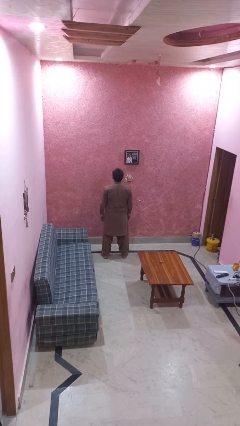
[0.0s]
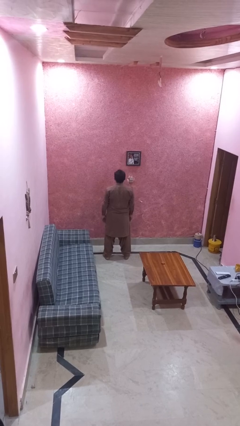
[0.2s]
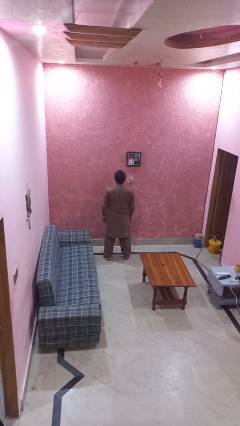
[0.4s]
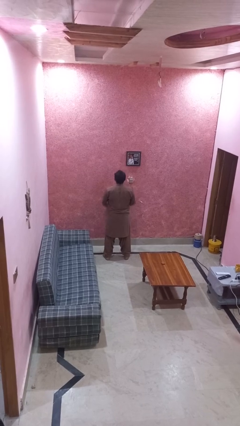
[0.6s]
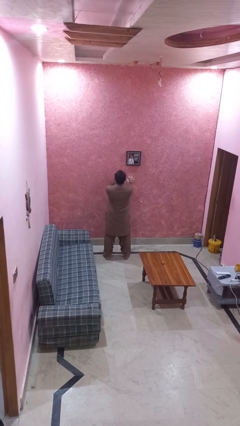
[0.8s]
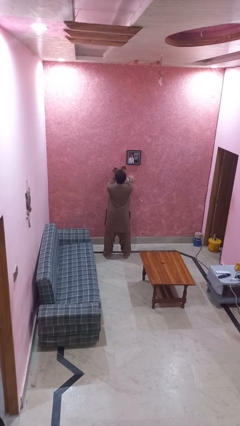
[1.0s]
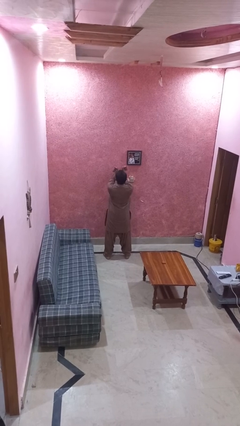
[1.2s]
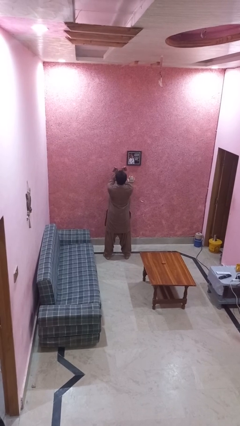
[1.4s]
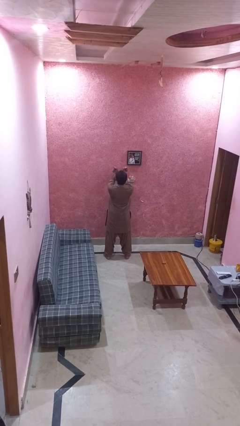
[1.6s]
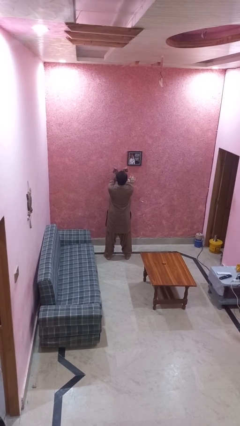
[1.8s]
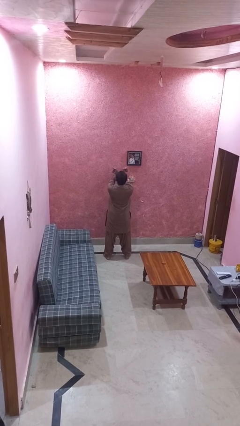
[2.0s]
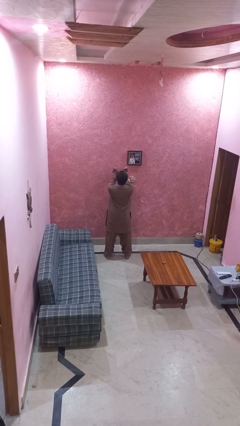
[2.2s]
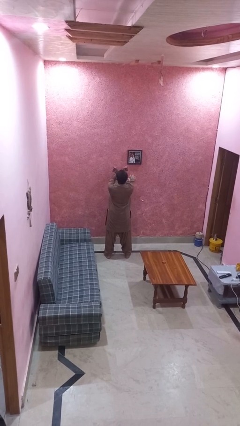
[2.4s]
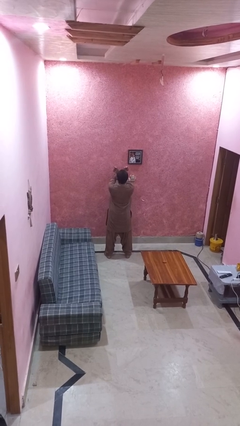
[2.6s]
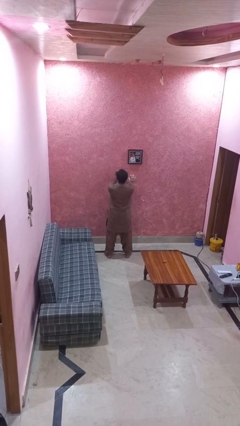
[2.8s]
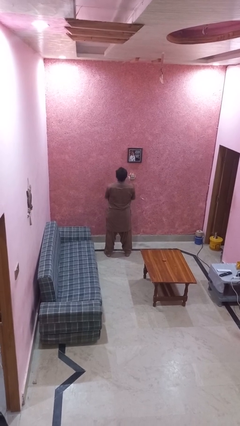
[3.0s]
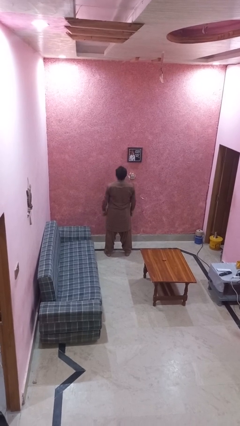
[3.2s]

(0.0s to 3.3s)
person gestures arms x

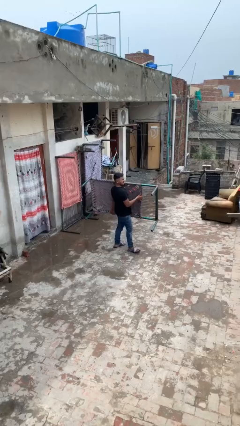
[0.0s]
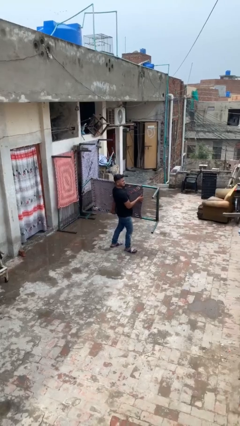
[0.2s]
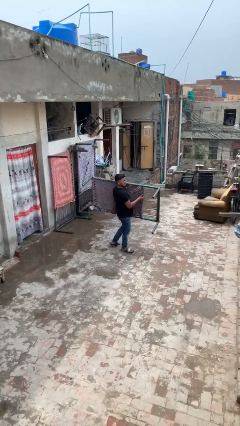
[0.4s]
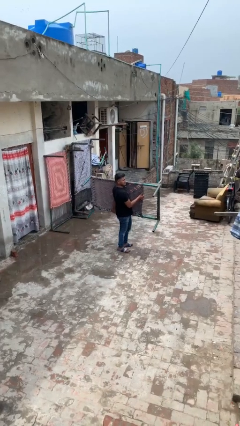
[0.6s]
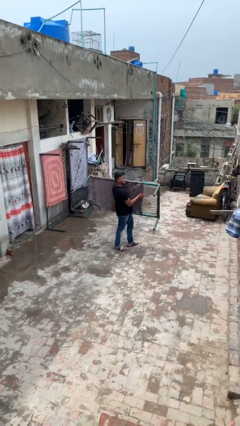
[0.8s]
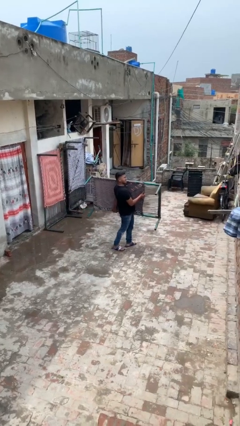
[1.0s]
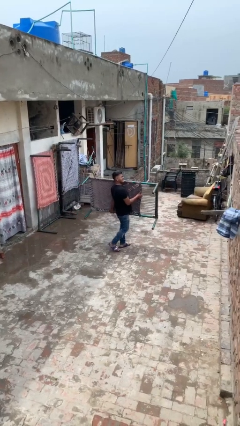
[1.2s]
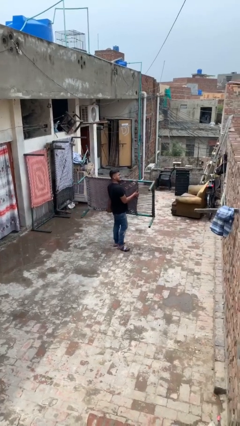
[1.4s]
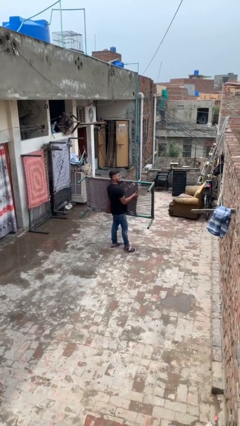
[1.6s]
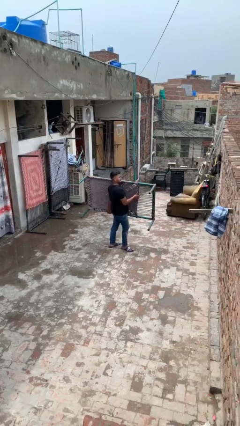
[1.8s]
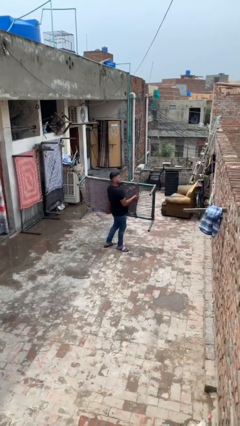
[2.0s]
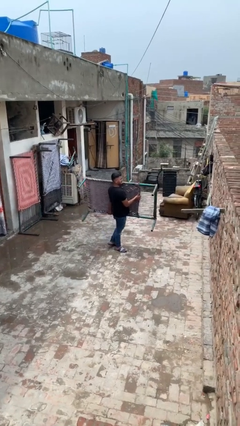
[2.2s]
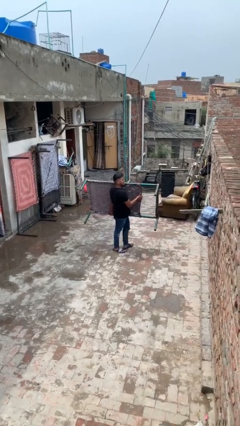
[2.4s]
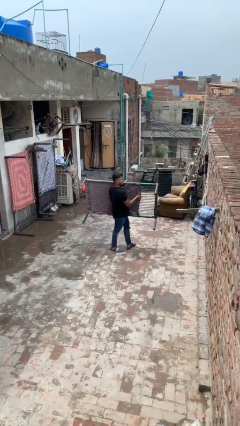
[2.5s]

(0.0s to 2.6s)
person carries heavy object

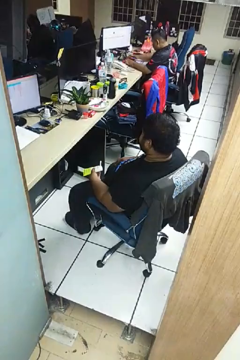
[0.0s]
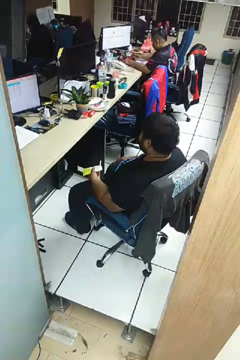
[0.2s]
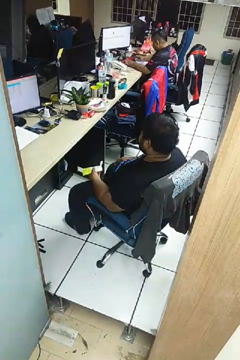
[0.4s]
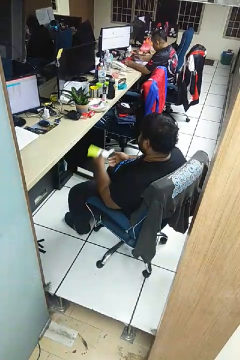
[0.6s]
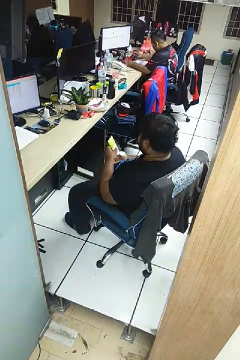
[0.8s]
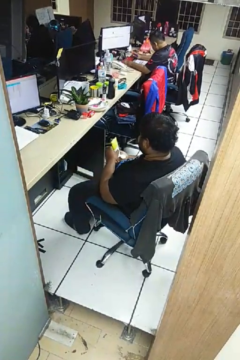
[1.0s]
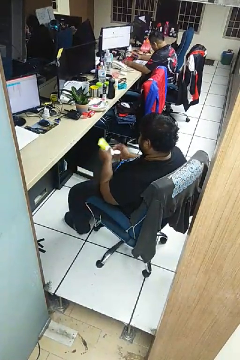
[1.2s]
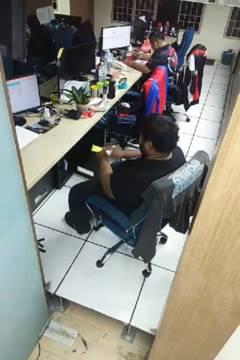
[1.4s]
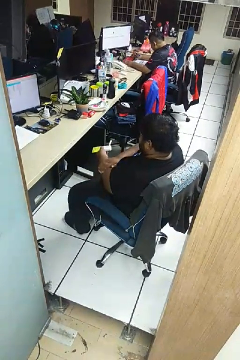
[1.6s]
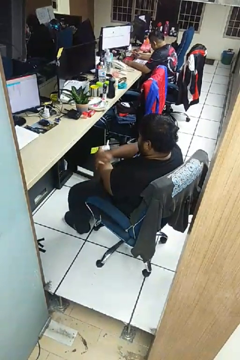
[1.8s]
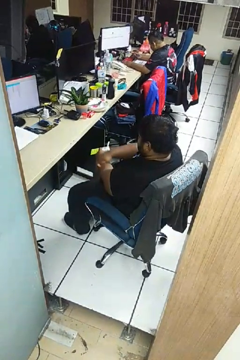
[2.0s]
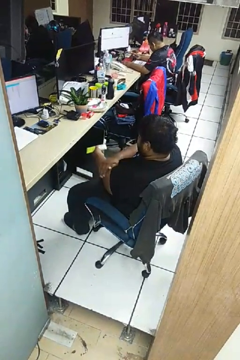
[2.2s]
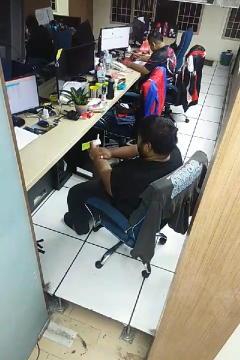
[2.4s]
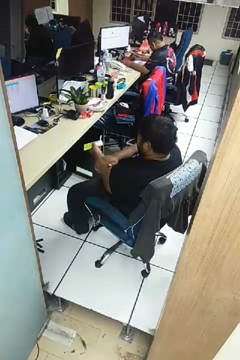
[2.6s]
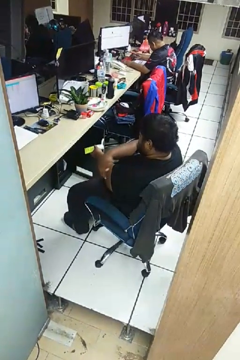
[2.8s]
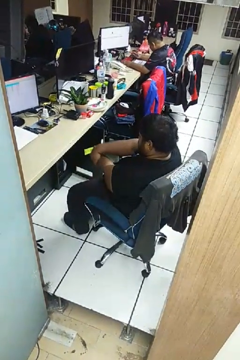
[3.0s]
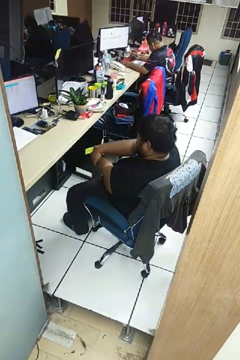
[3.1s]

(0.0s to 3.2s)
person applies sunscreen

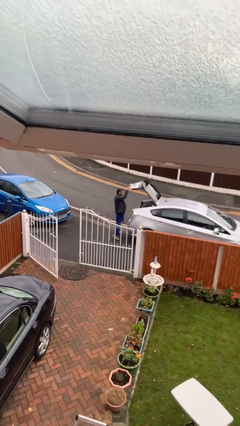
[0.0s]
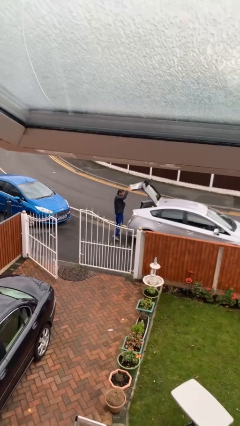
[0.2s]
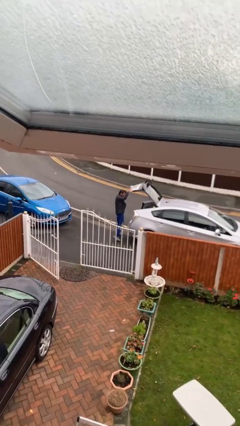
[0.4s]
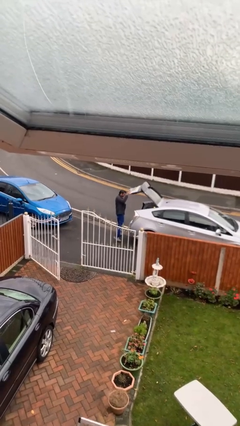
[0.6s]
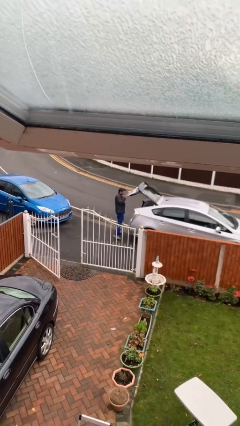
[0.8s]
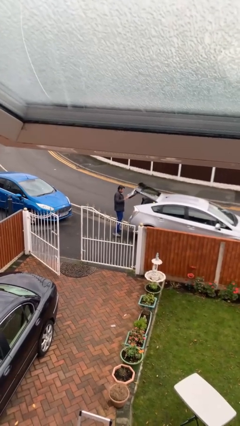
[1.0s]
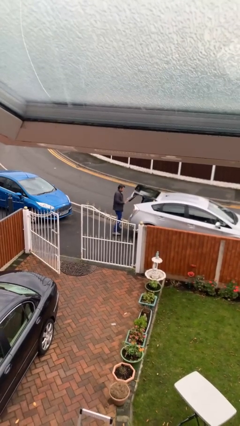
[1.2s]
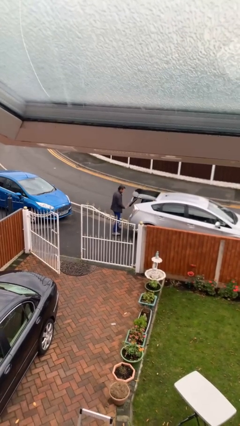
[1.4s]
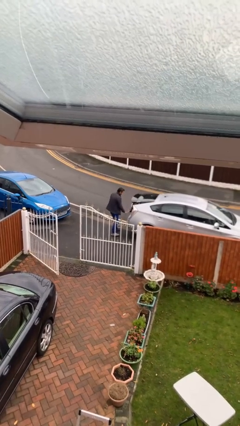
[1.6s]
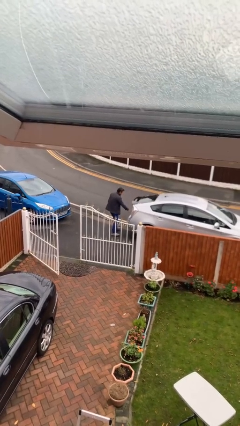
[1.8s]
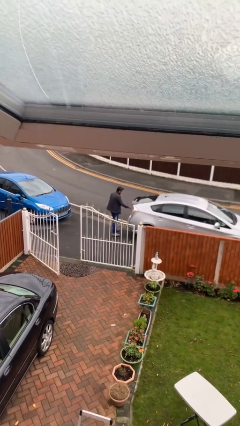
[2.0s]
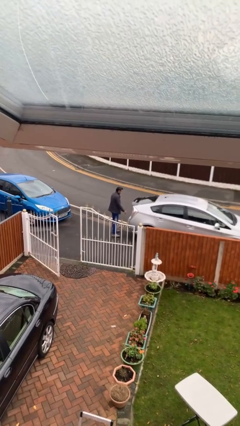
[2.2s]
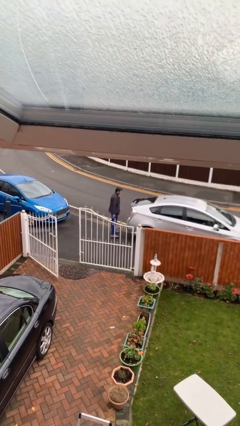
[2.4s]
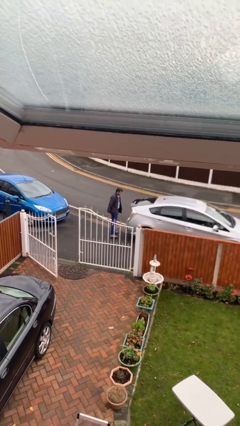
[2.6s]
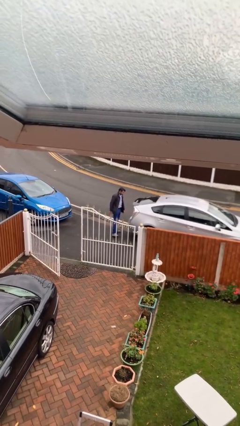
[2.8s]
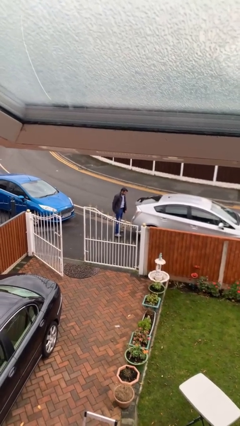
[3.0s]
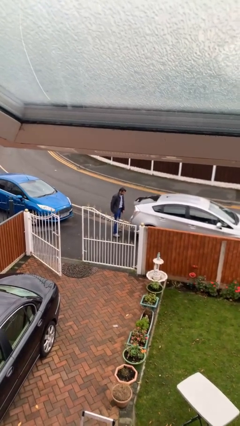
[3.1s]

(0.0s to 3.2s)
person closes car trunk

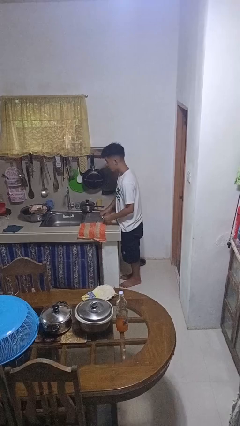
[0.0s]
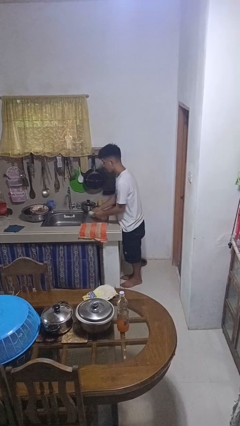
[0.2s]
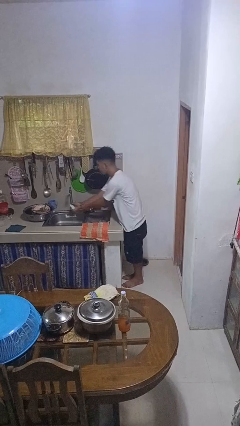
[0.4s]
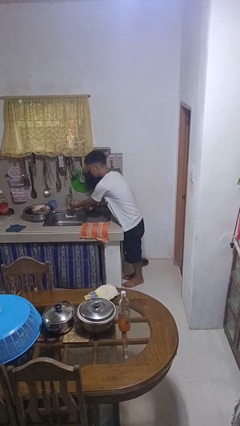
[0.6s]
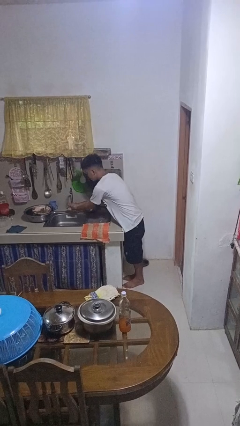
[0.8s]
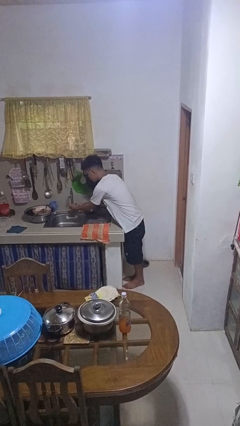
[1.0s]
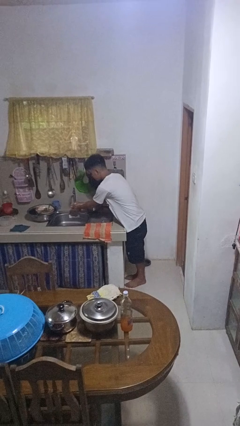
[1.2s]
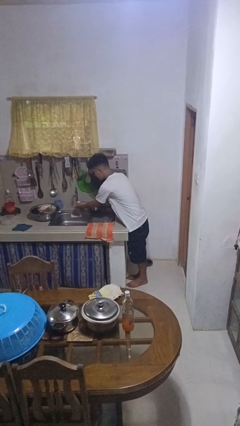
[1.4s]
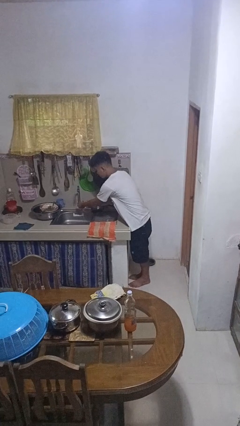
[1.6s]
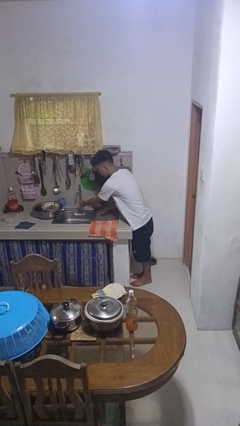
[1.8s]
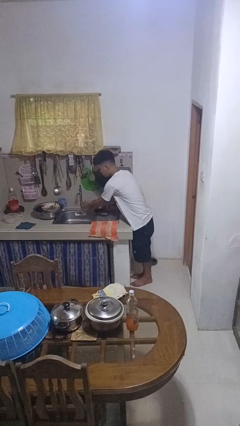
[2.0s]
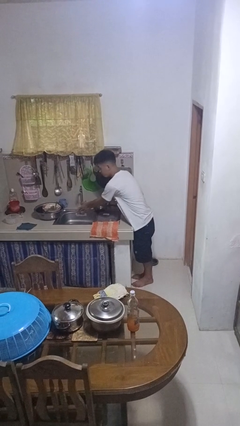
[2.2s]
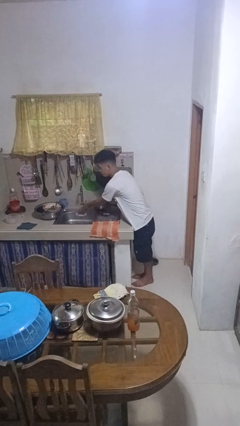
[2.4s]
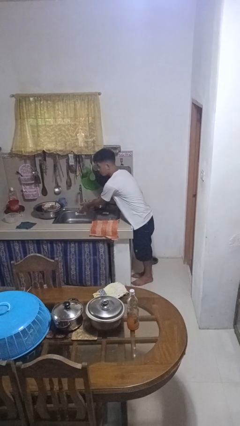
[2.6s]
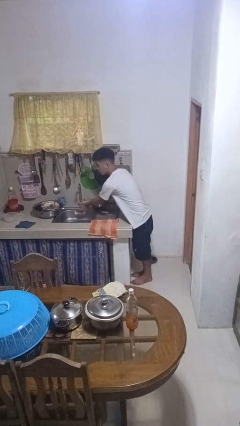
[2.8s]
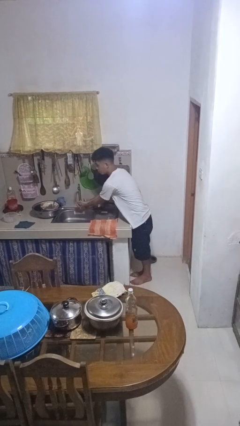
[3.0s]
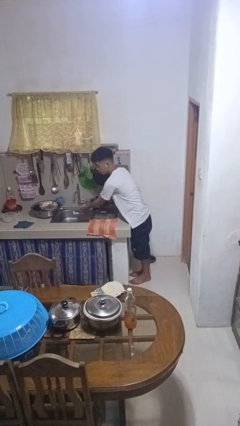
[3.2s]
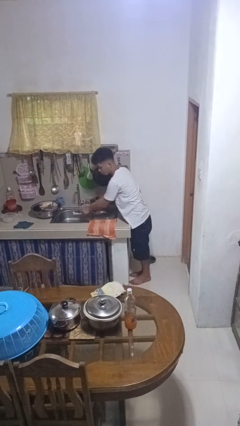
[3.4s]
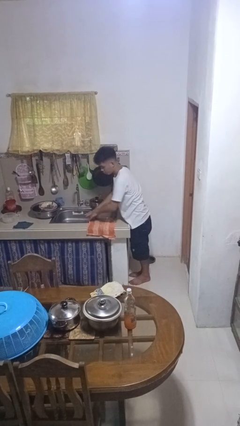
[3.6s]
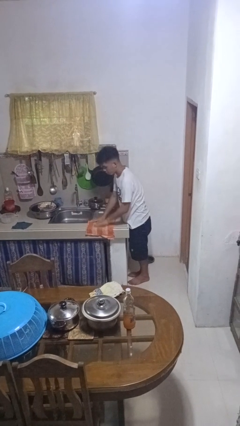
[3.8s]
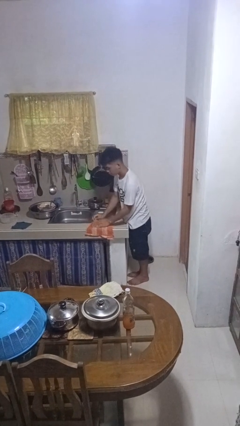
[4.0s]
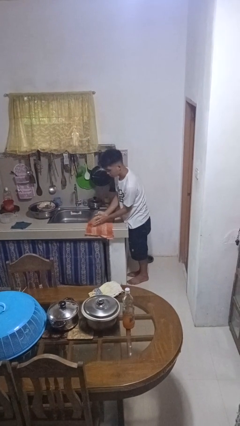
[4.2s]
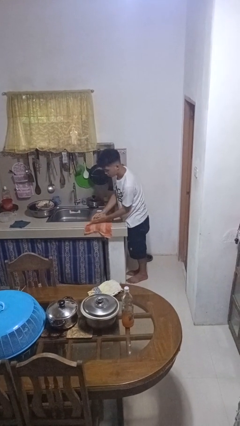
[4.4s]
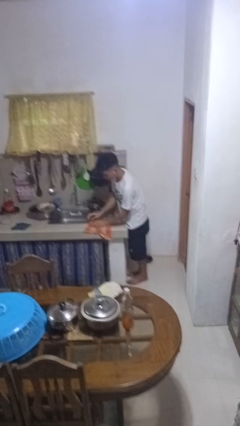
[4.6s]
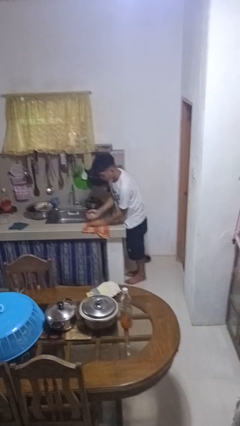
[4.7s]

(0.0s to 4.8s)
person washes hands

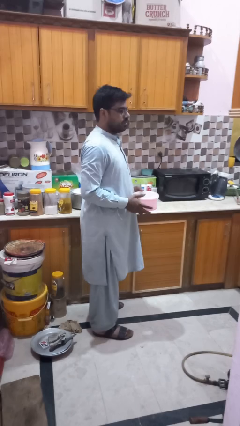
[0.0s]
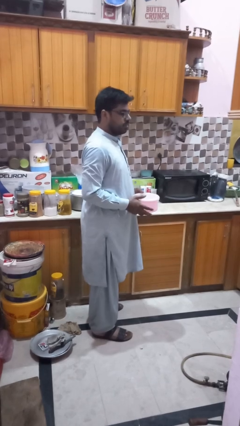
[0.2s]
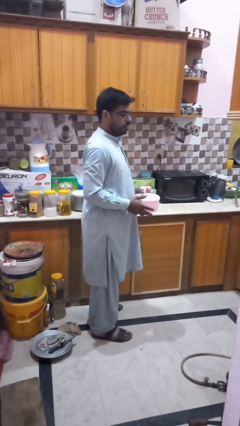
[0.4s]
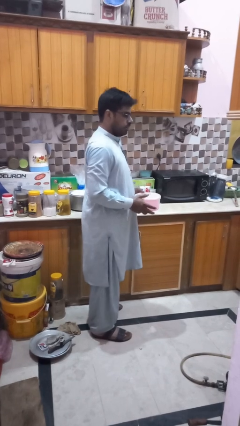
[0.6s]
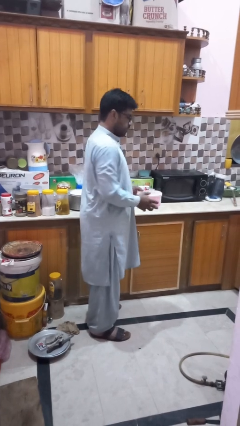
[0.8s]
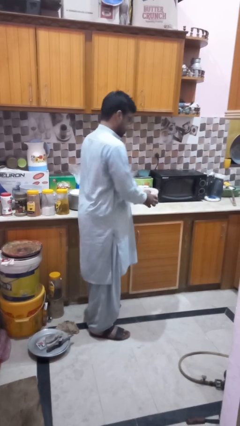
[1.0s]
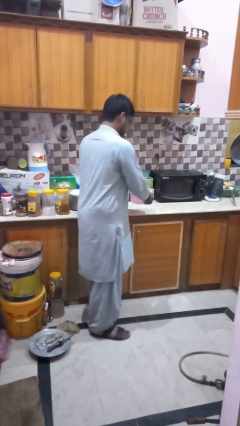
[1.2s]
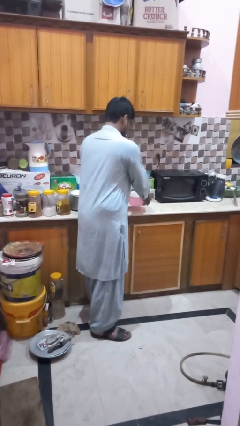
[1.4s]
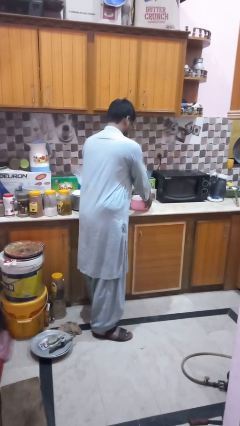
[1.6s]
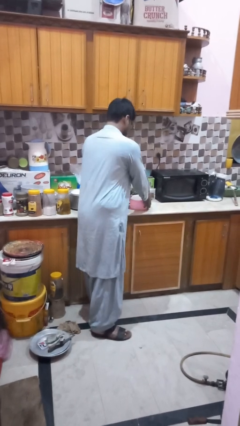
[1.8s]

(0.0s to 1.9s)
person puts down object on countertop
